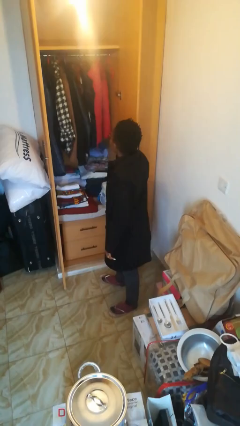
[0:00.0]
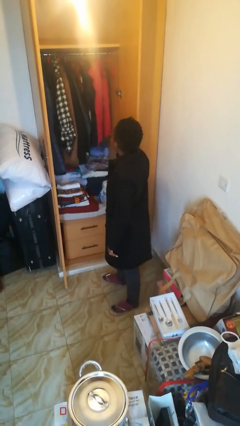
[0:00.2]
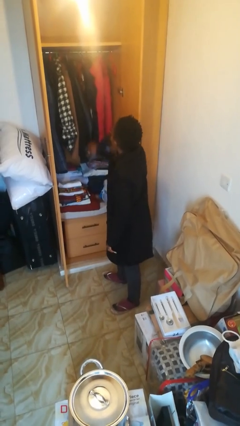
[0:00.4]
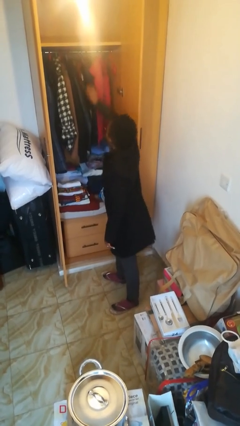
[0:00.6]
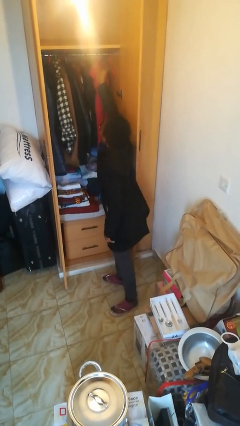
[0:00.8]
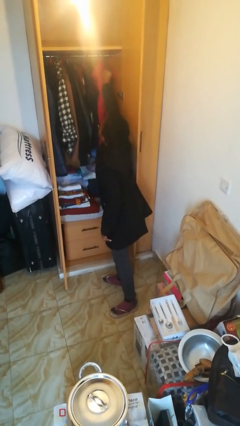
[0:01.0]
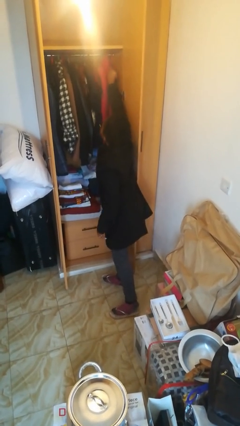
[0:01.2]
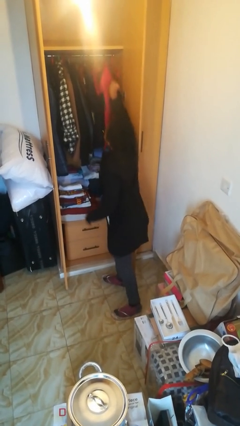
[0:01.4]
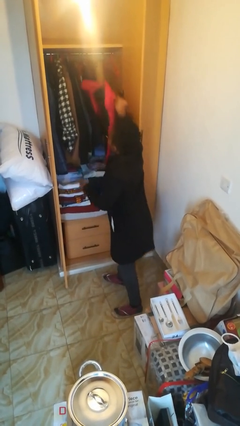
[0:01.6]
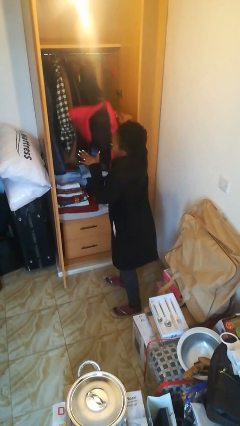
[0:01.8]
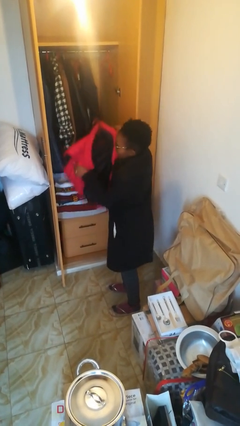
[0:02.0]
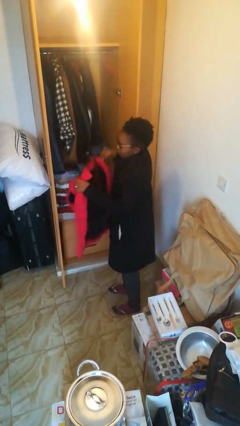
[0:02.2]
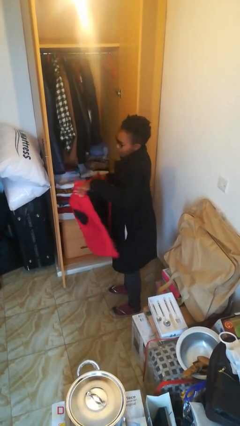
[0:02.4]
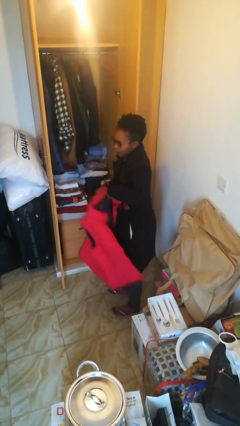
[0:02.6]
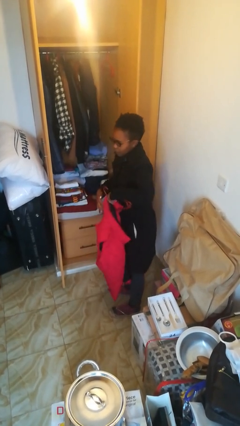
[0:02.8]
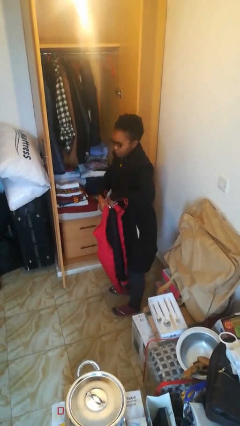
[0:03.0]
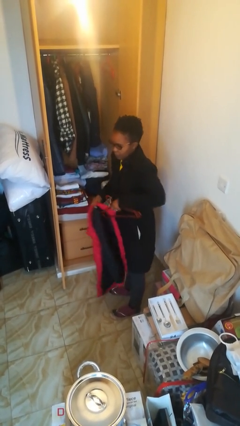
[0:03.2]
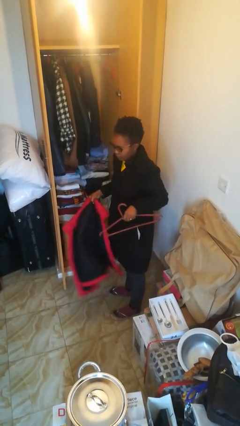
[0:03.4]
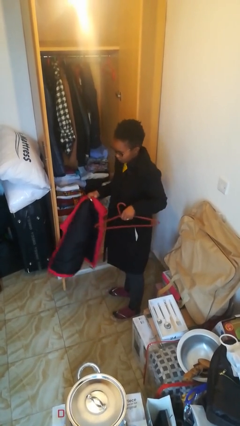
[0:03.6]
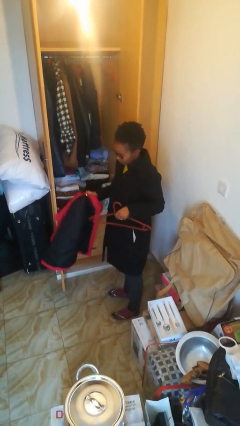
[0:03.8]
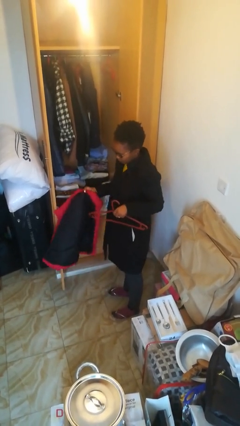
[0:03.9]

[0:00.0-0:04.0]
person takes clothes from closet

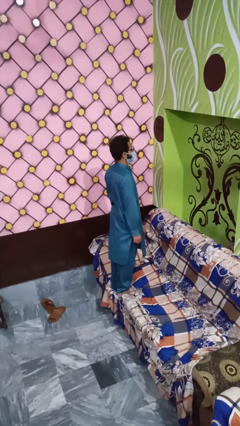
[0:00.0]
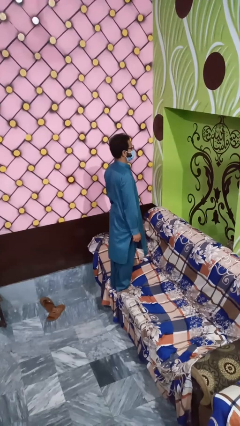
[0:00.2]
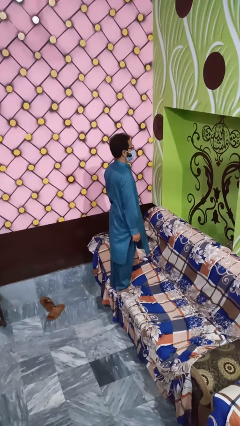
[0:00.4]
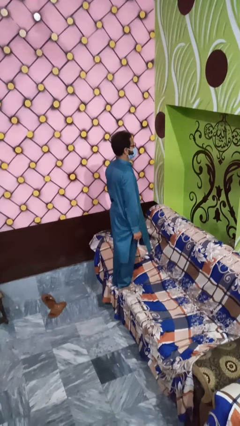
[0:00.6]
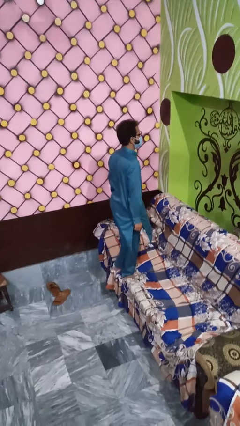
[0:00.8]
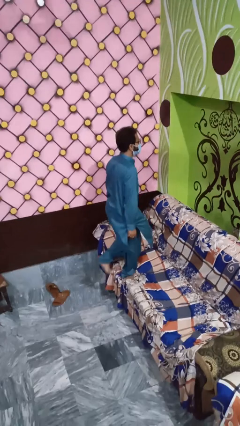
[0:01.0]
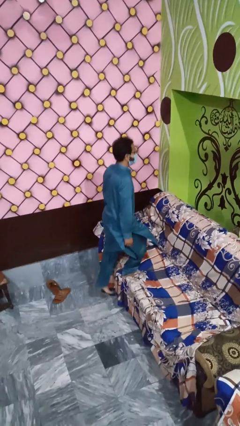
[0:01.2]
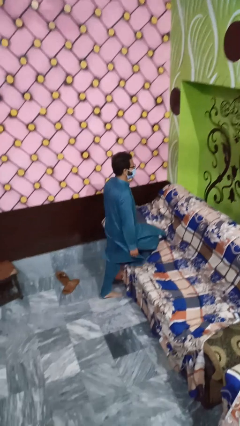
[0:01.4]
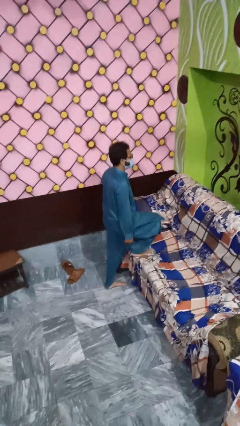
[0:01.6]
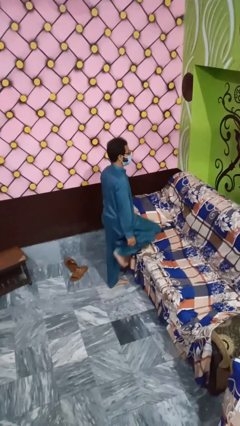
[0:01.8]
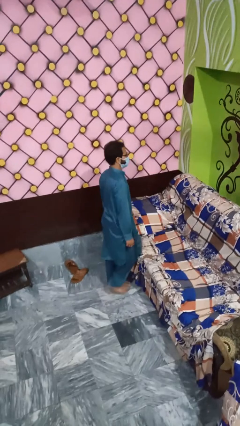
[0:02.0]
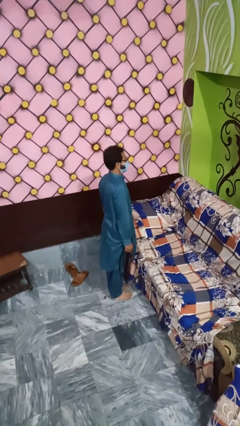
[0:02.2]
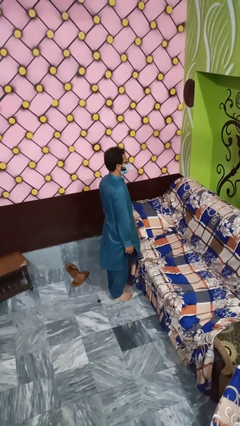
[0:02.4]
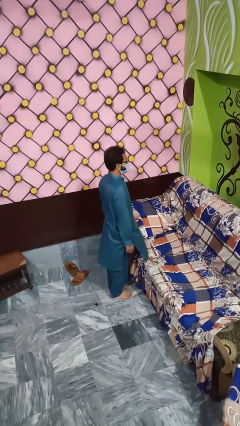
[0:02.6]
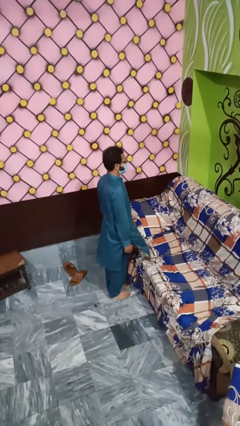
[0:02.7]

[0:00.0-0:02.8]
person climbs off couch

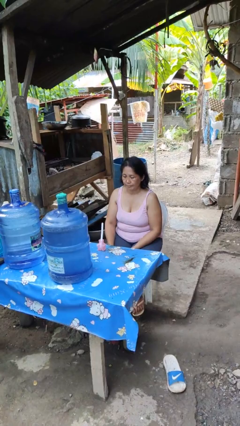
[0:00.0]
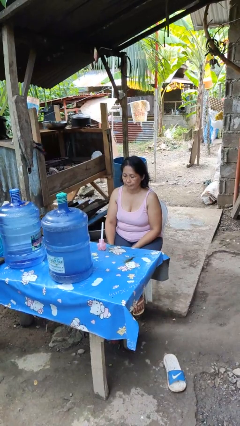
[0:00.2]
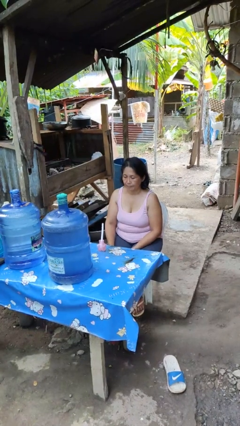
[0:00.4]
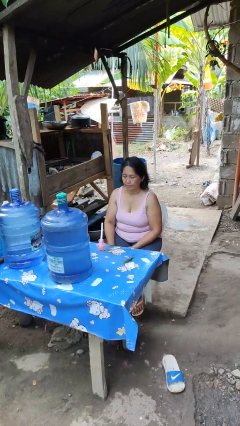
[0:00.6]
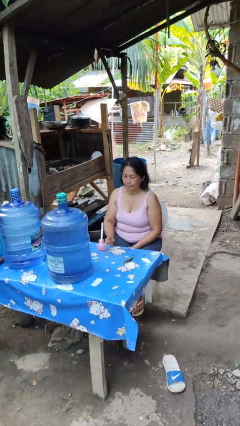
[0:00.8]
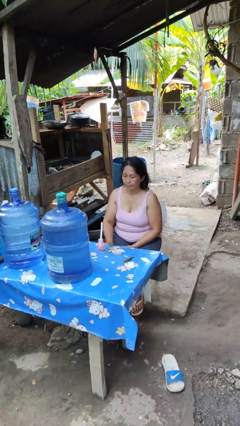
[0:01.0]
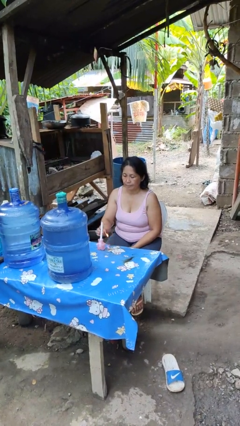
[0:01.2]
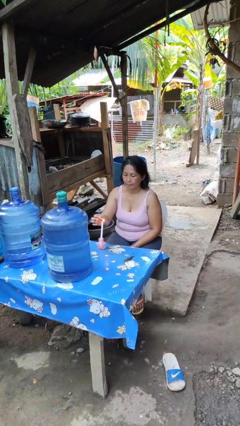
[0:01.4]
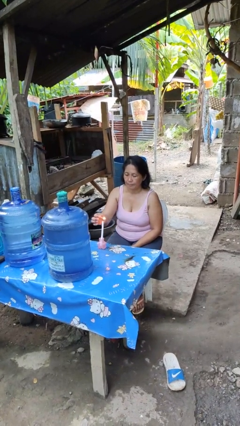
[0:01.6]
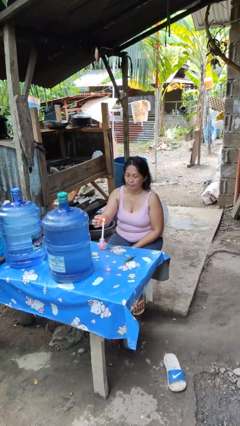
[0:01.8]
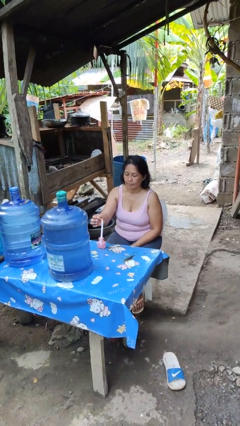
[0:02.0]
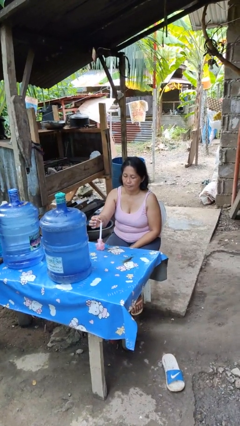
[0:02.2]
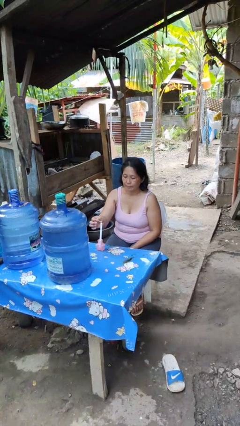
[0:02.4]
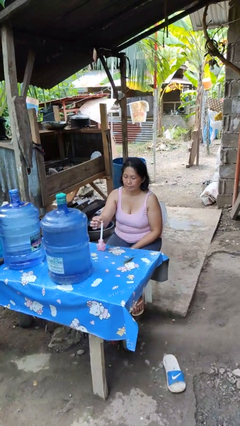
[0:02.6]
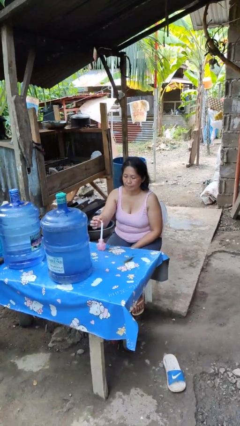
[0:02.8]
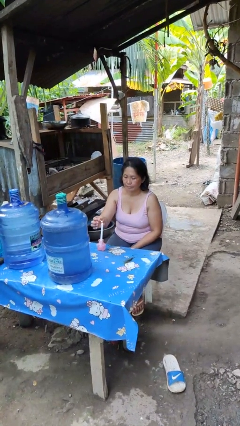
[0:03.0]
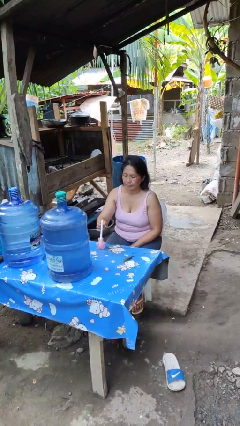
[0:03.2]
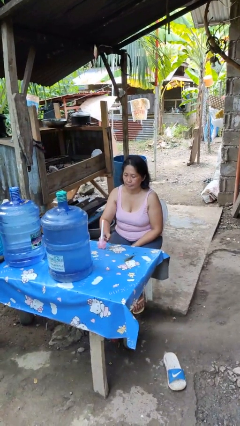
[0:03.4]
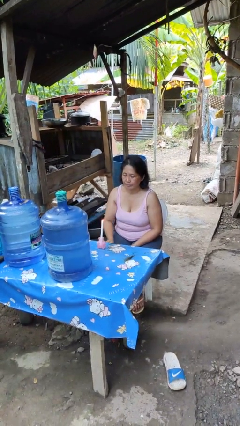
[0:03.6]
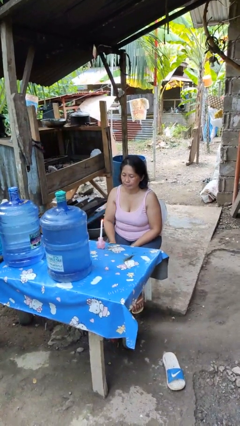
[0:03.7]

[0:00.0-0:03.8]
person lights candle

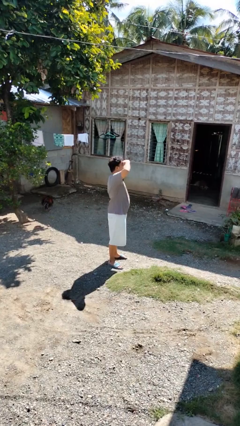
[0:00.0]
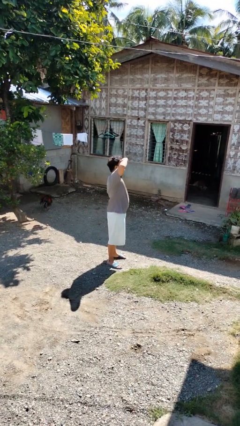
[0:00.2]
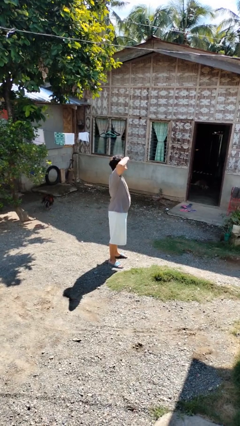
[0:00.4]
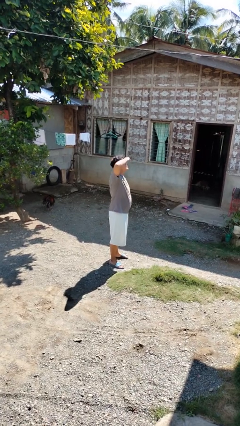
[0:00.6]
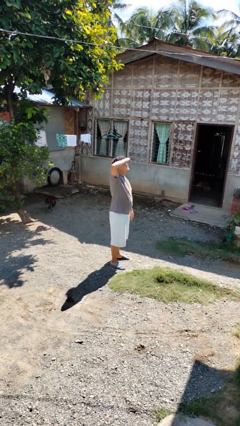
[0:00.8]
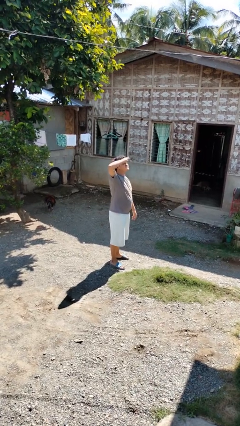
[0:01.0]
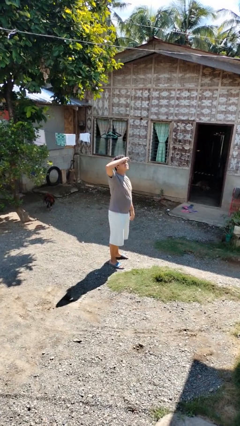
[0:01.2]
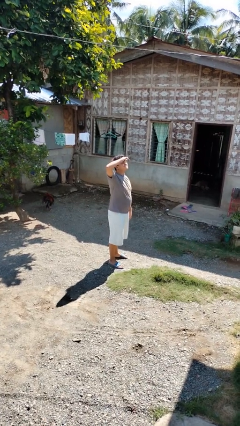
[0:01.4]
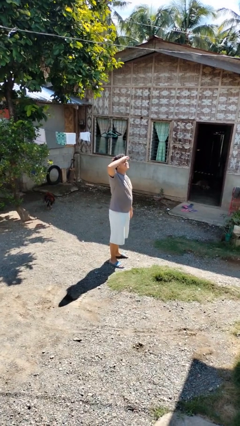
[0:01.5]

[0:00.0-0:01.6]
person shades eyes

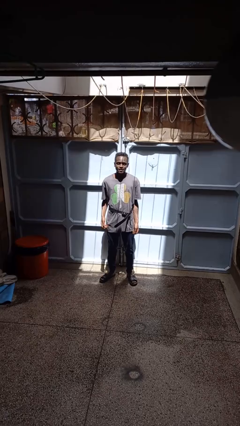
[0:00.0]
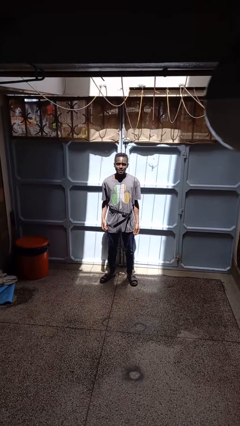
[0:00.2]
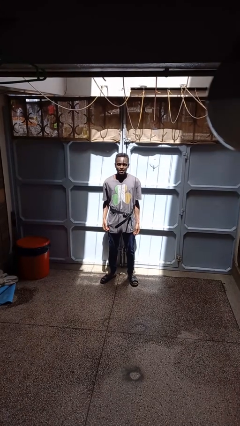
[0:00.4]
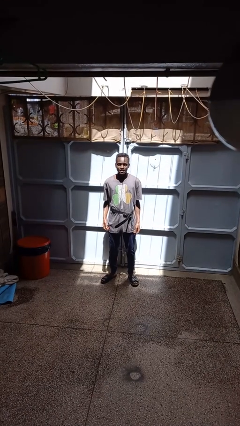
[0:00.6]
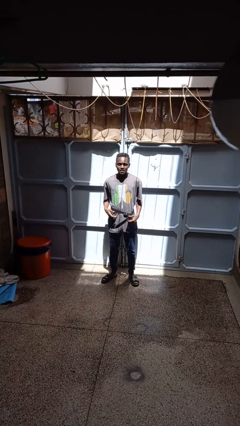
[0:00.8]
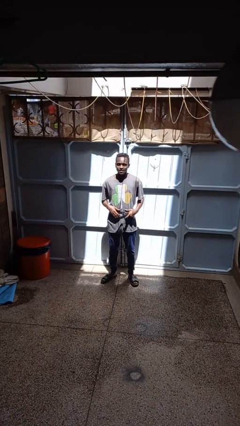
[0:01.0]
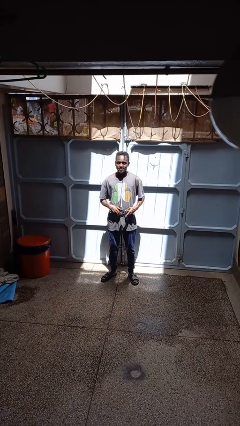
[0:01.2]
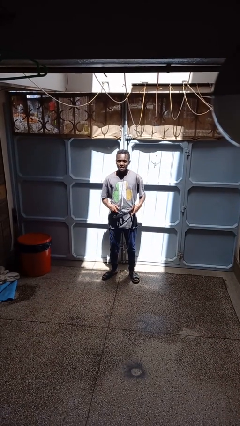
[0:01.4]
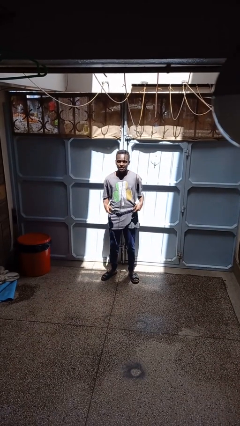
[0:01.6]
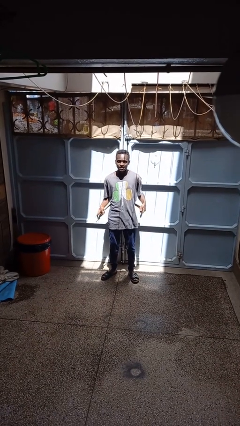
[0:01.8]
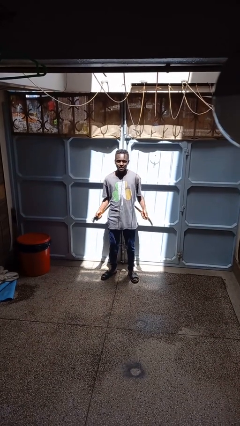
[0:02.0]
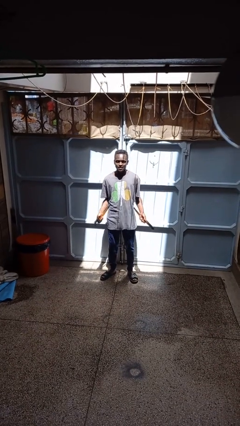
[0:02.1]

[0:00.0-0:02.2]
person takes off belt

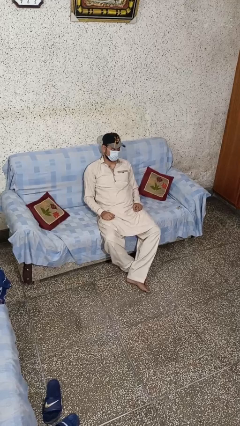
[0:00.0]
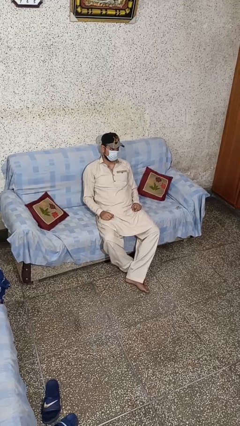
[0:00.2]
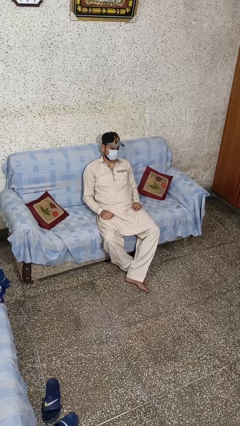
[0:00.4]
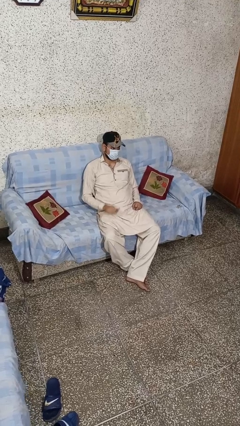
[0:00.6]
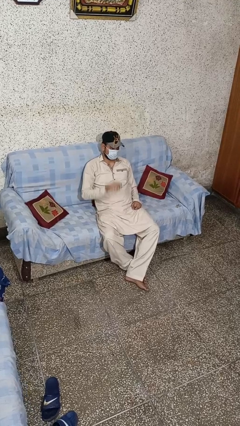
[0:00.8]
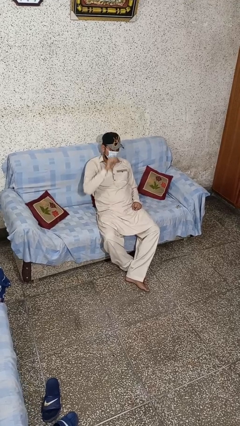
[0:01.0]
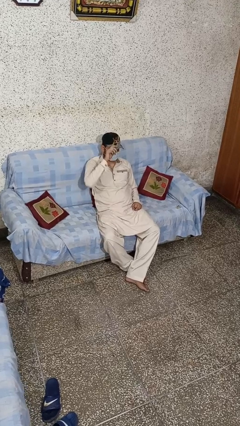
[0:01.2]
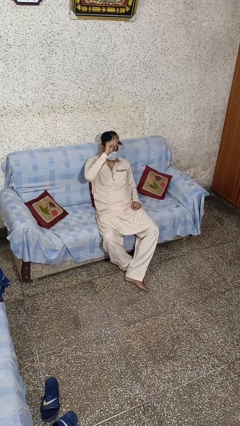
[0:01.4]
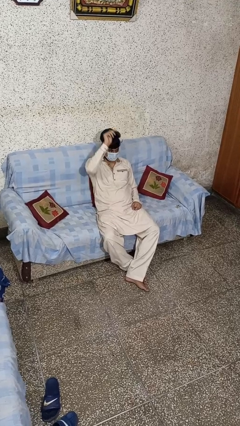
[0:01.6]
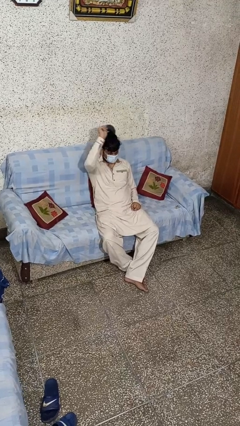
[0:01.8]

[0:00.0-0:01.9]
person takes off hat

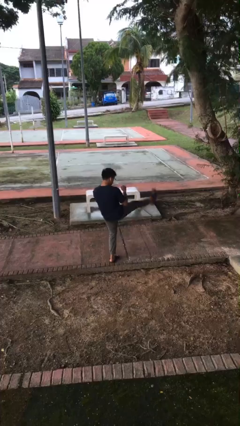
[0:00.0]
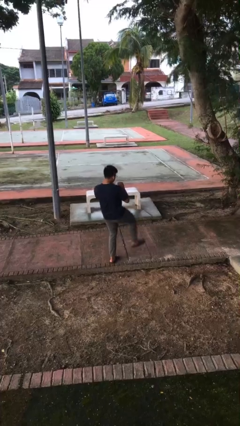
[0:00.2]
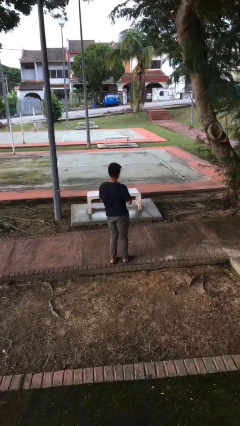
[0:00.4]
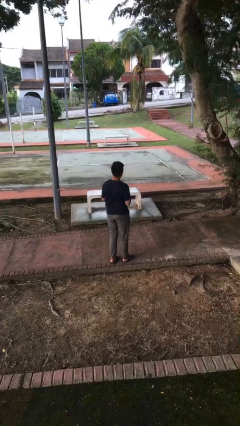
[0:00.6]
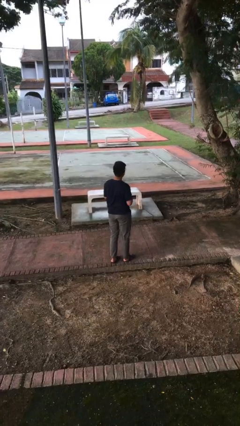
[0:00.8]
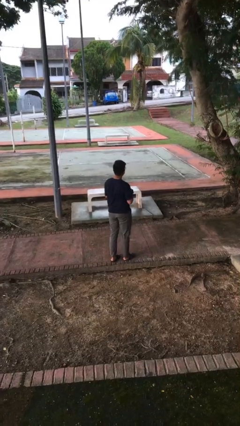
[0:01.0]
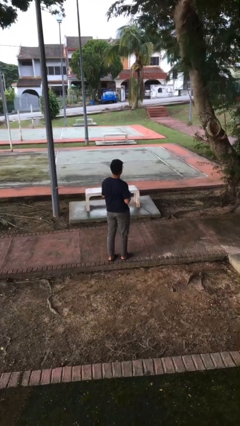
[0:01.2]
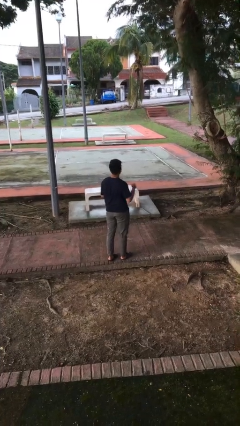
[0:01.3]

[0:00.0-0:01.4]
person karate kicks
